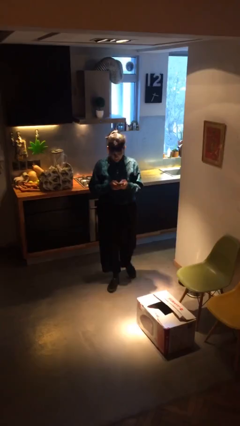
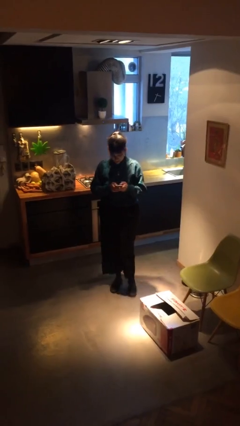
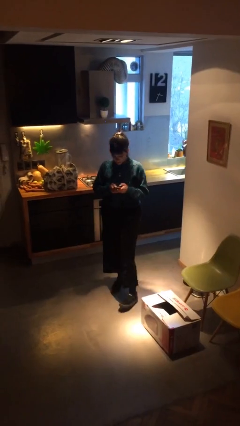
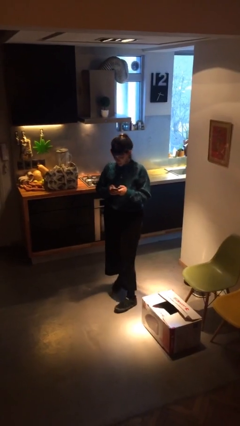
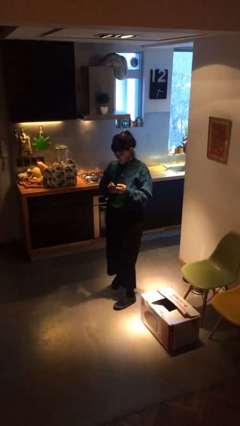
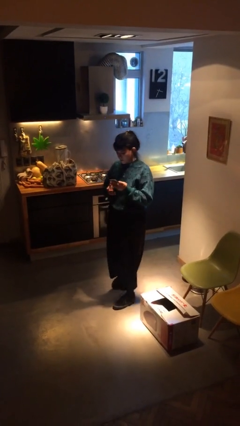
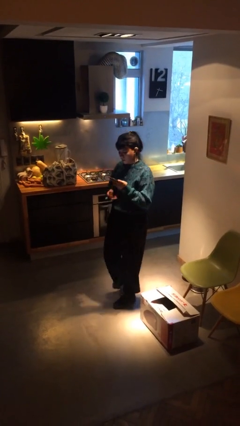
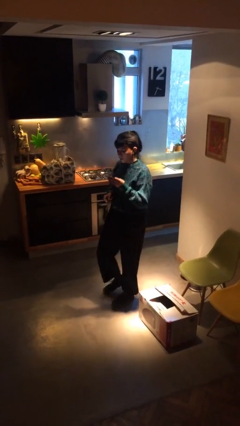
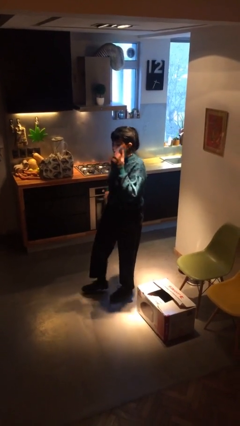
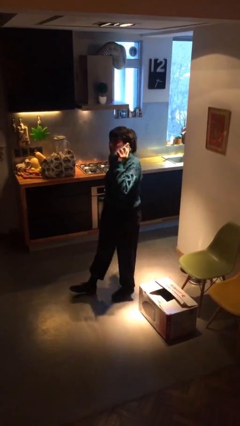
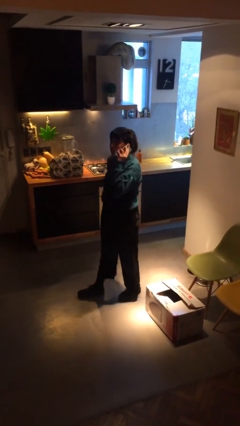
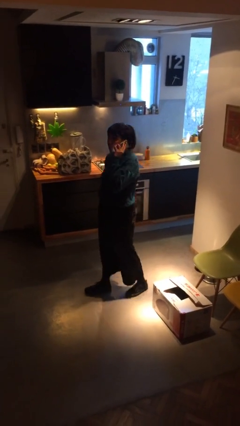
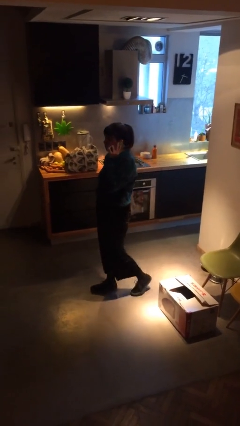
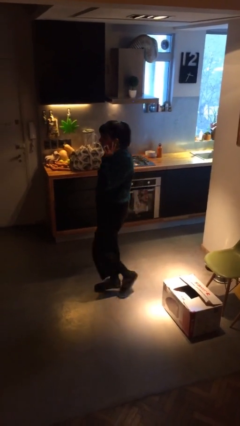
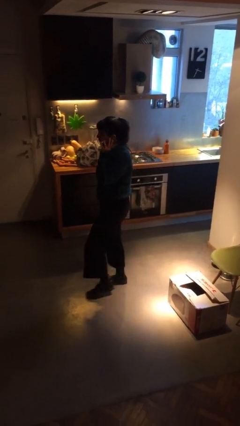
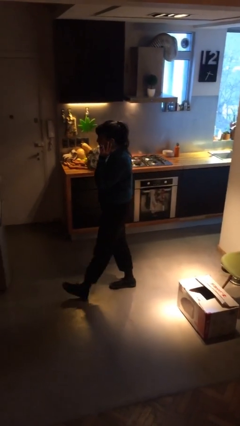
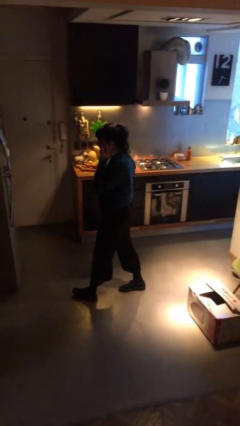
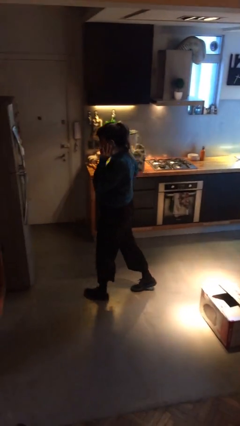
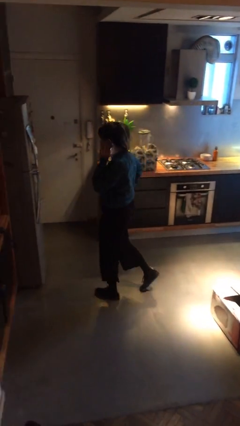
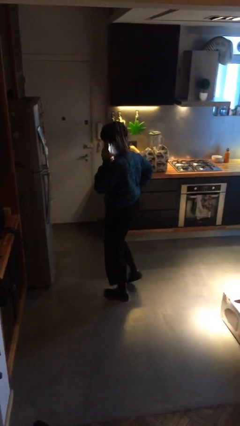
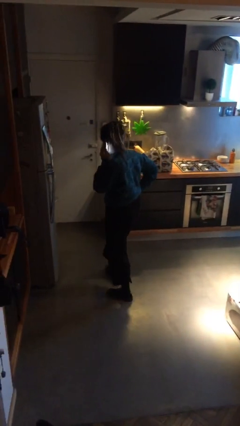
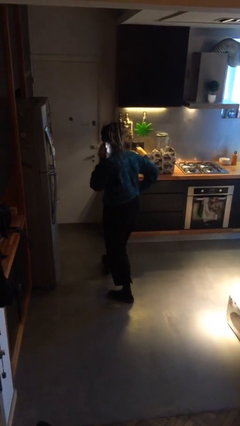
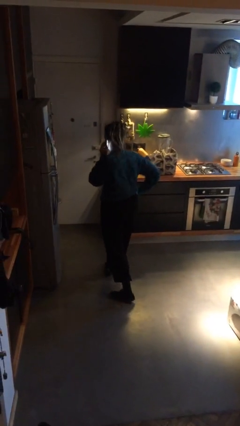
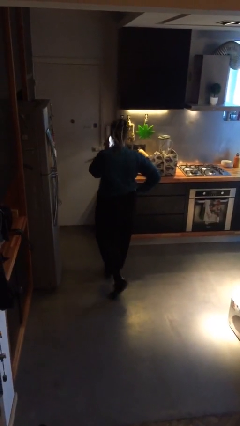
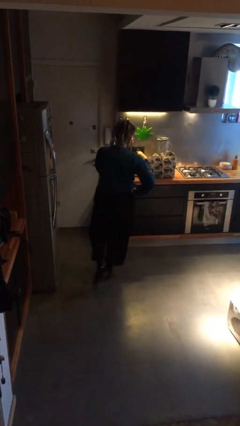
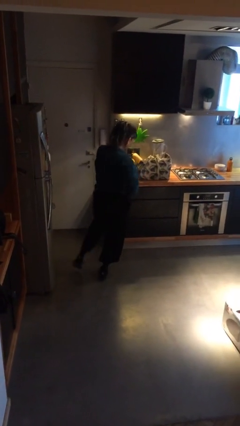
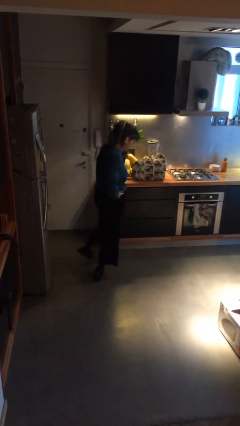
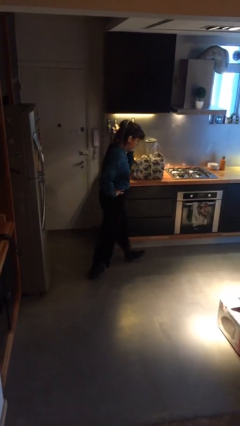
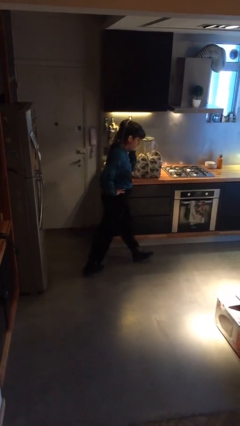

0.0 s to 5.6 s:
person talks on phone

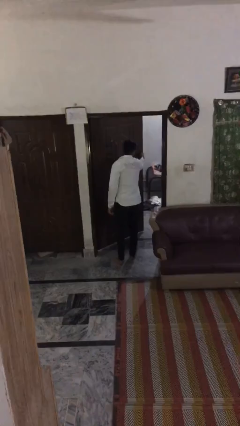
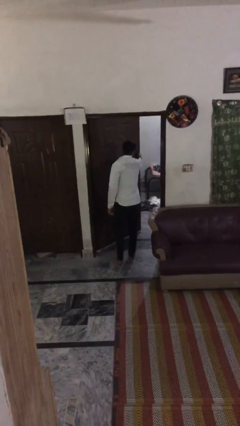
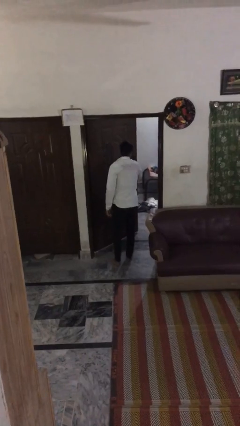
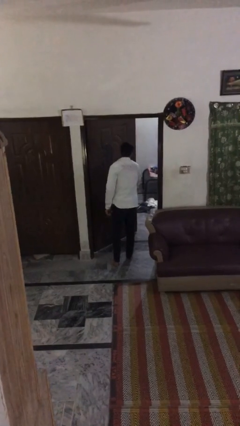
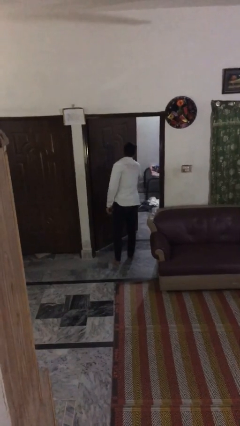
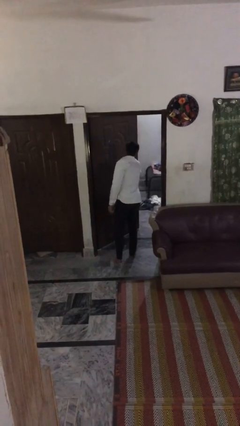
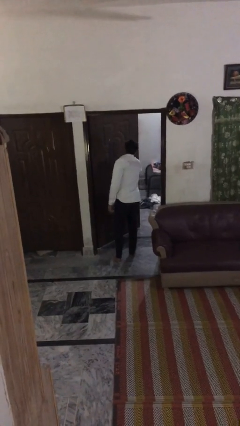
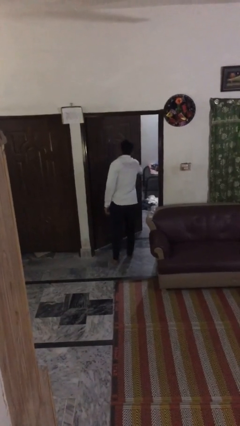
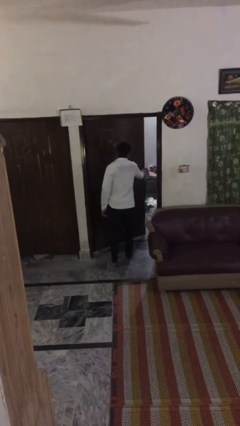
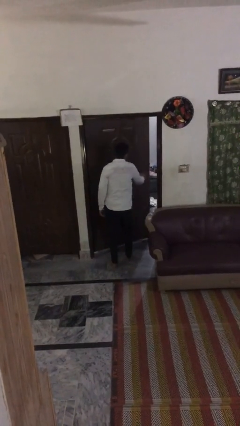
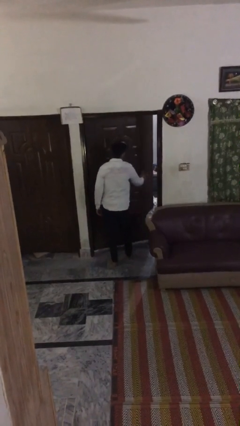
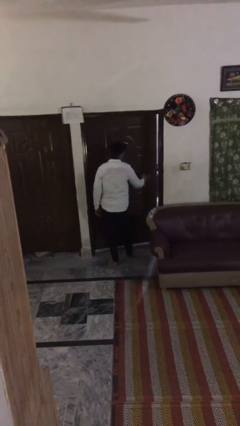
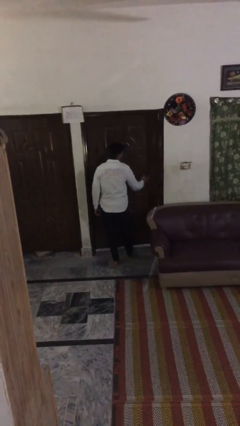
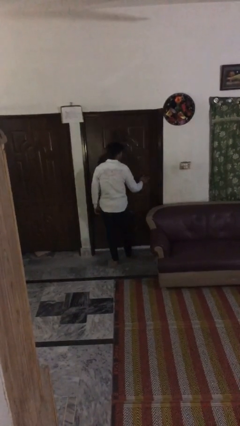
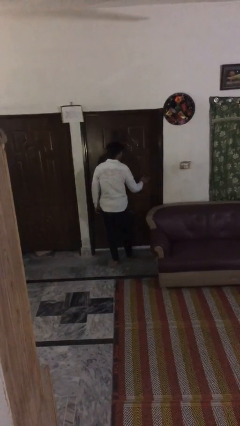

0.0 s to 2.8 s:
person closes facility door

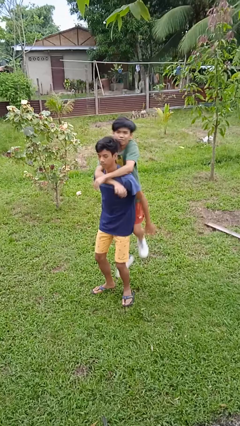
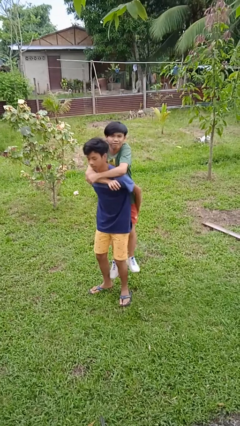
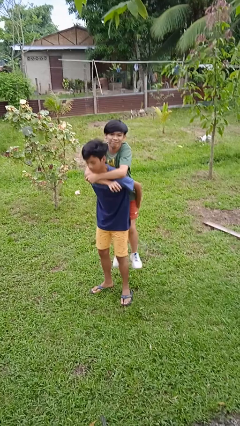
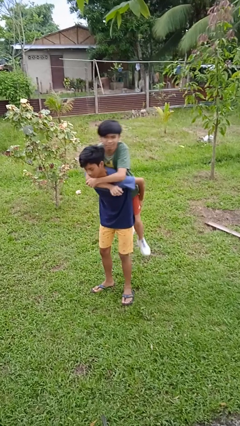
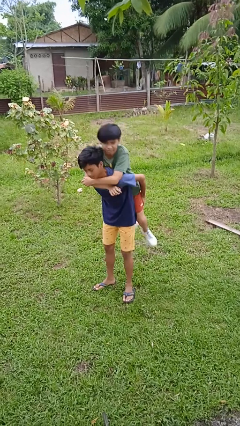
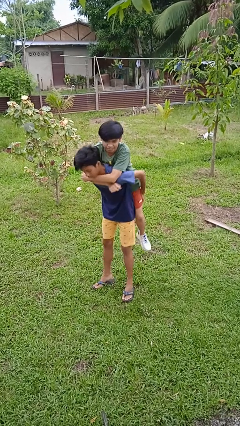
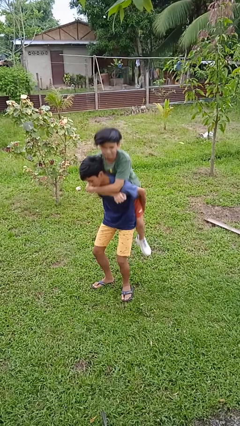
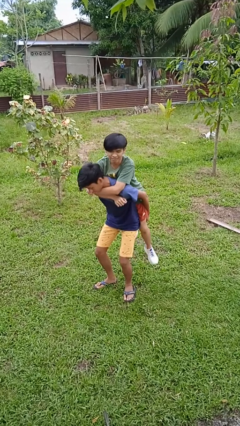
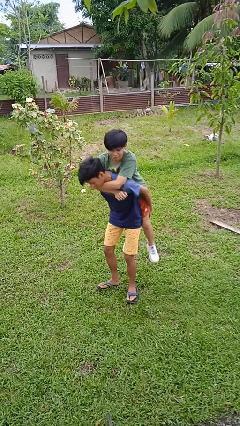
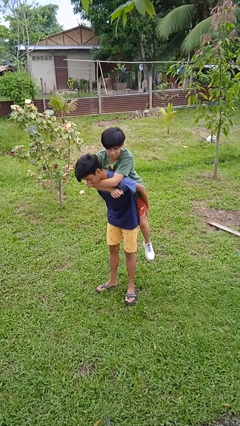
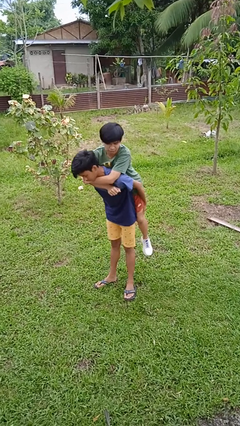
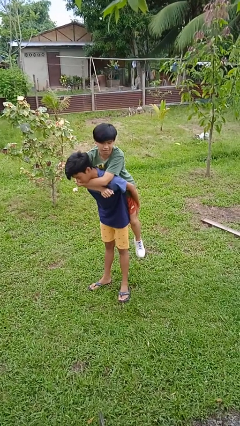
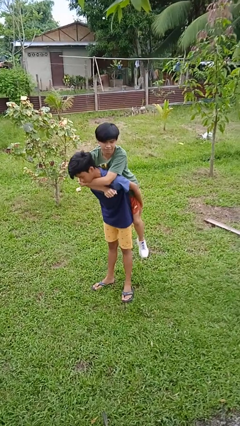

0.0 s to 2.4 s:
person carries person over shoulder

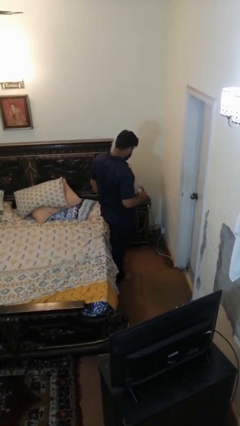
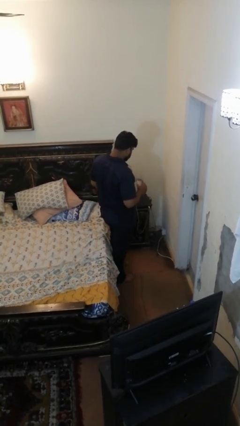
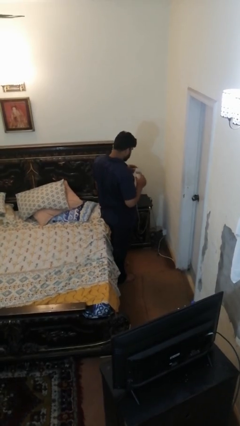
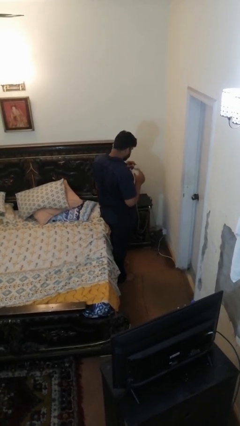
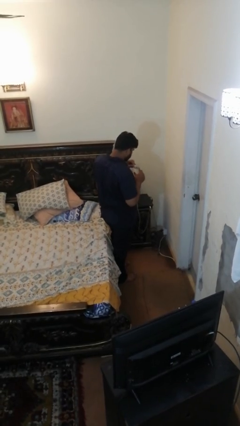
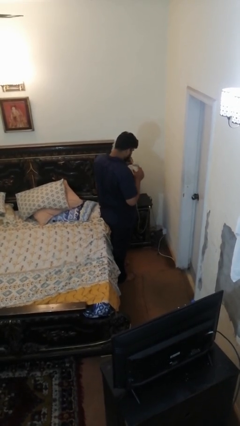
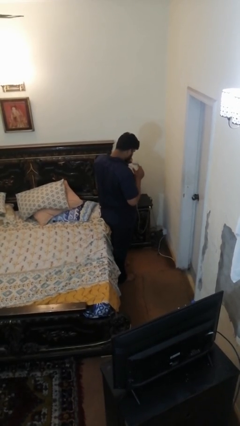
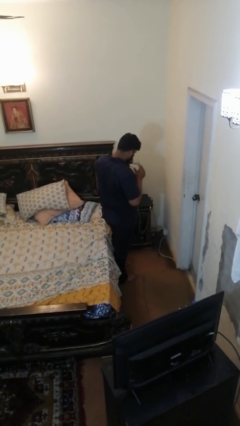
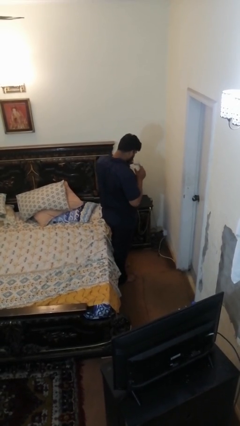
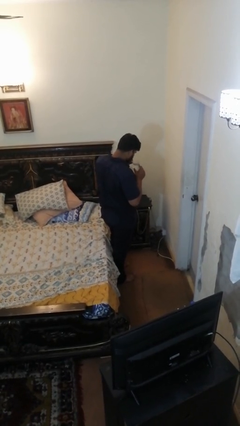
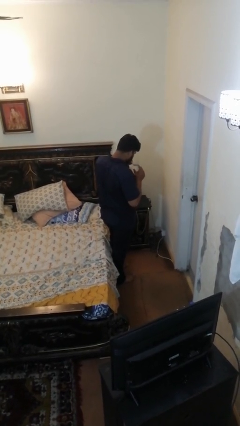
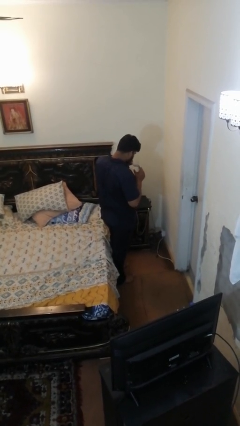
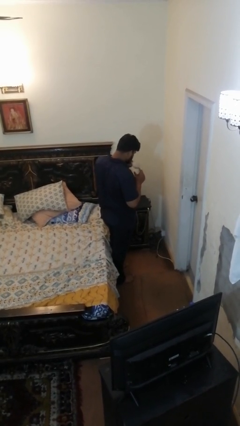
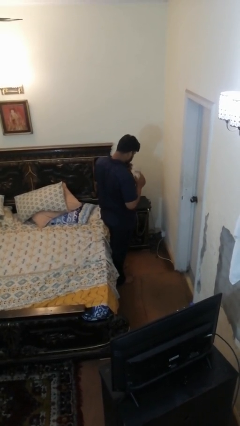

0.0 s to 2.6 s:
person drinks from straw

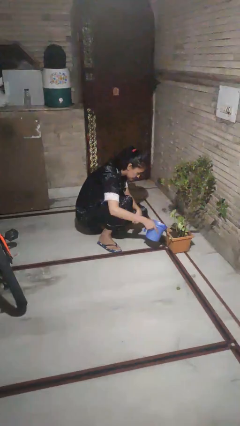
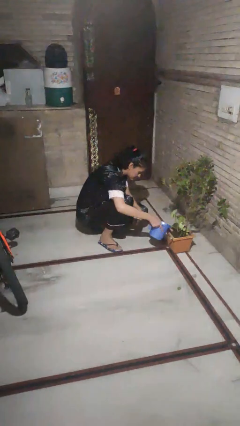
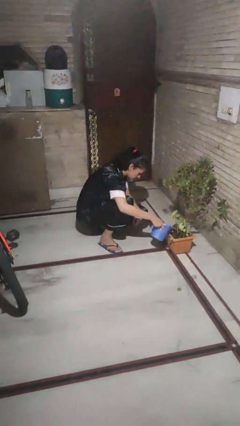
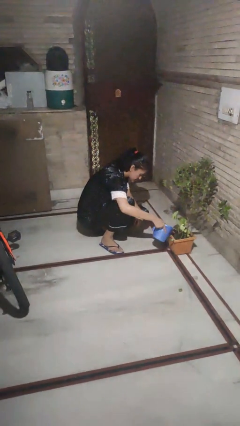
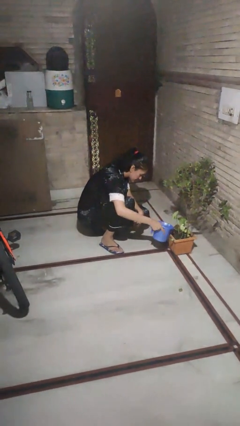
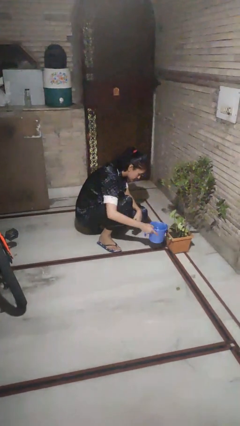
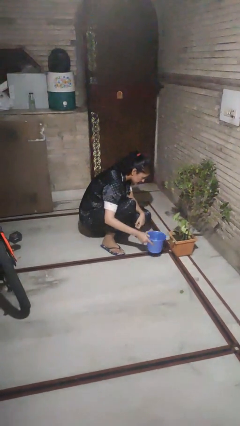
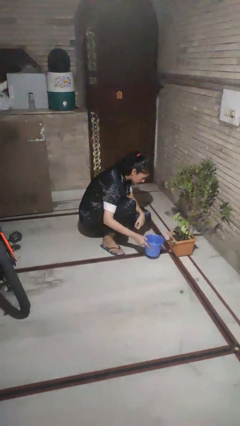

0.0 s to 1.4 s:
person waters houseplant

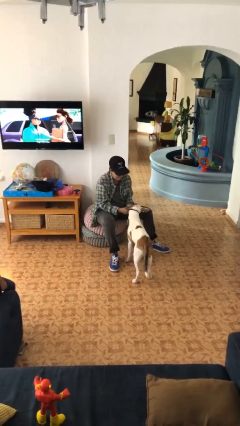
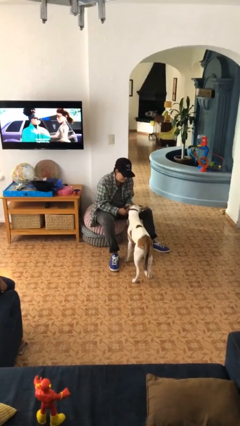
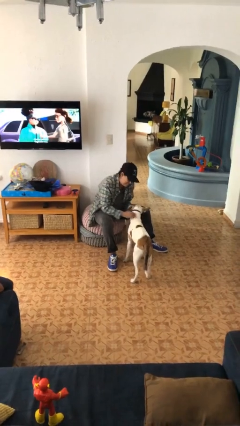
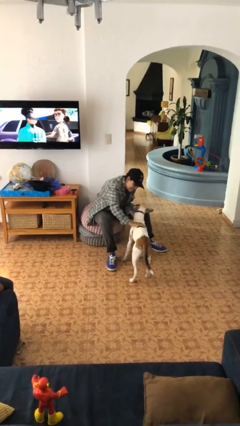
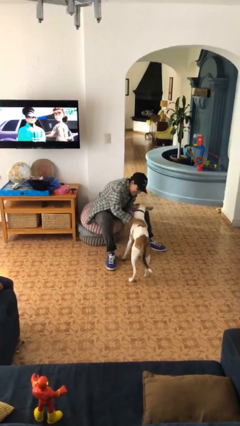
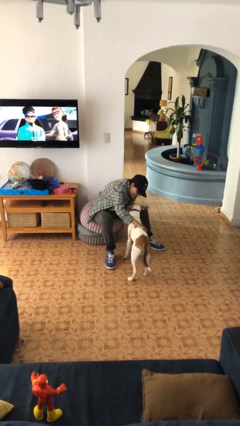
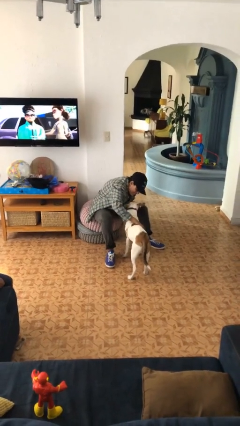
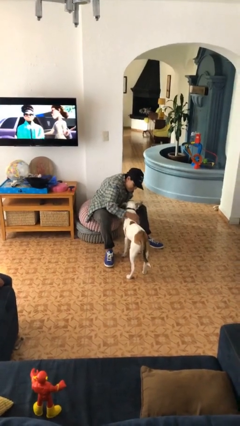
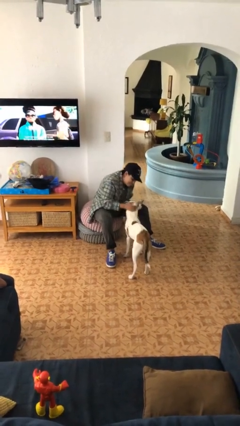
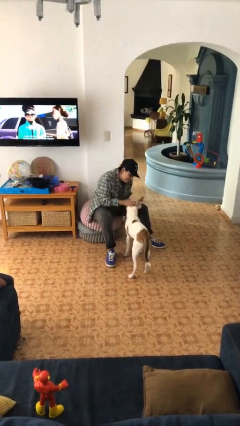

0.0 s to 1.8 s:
person pets dog

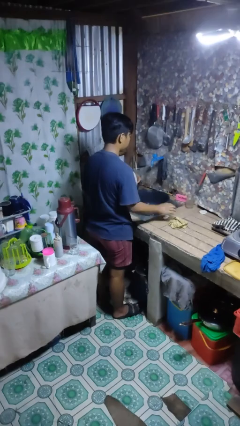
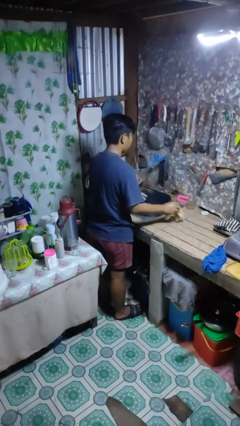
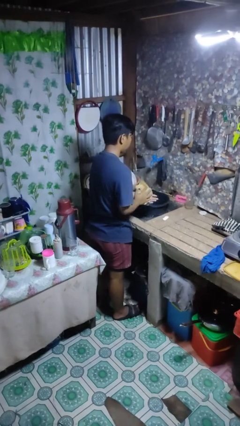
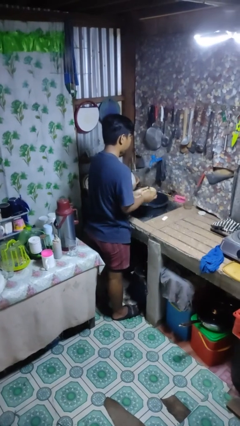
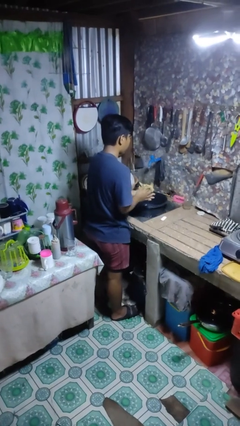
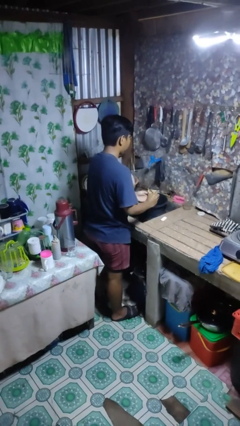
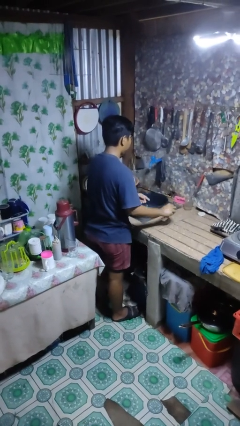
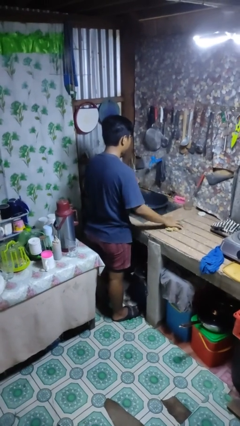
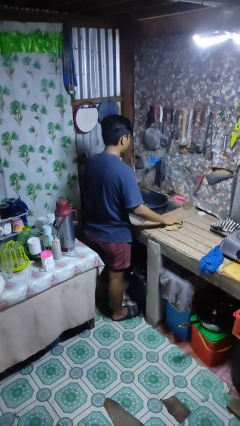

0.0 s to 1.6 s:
person dries hands with towel
